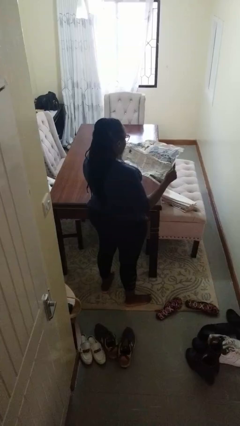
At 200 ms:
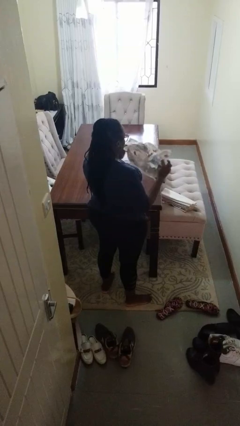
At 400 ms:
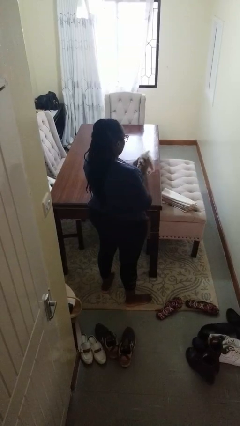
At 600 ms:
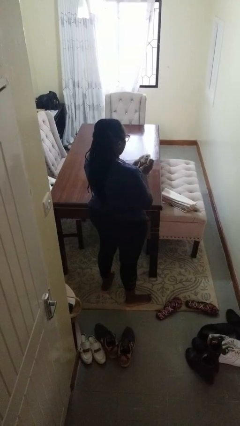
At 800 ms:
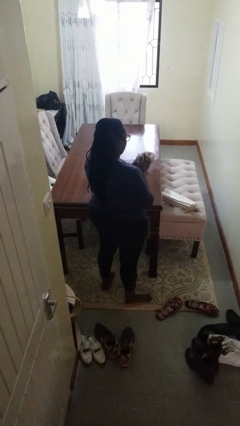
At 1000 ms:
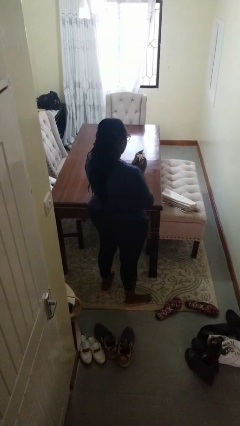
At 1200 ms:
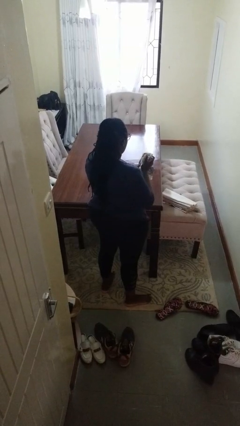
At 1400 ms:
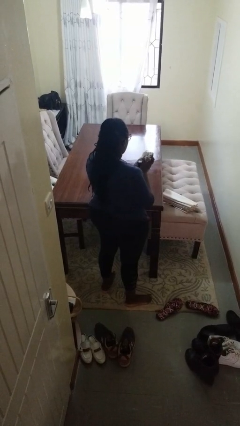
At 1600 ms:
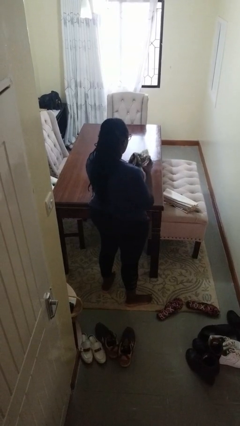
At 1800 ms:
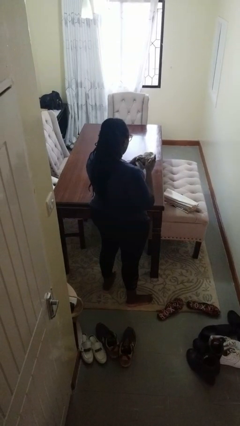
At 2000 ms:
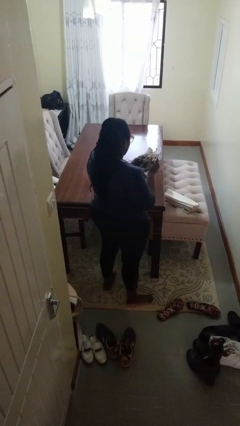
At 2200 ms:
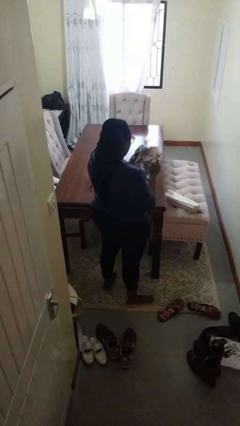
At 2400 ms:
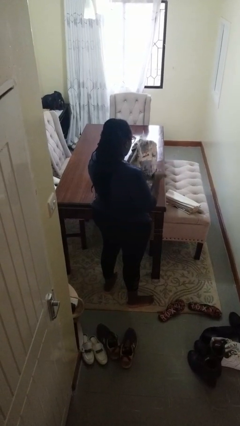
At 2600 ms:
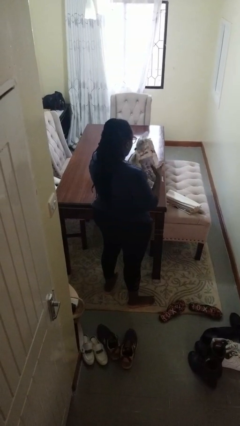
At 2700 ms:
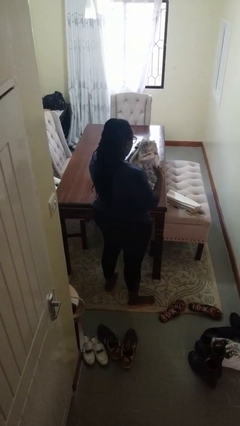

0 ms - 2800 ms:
person crumples paper

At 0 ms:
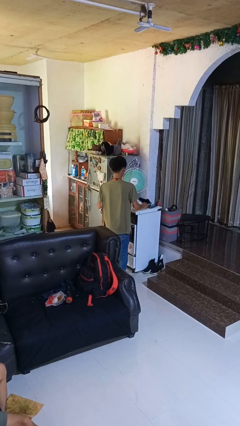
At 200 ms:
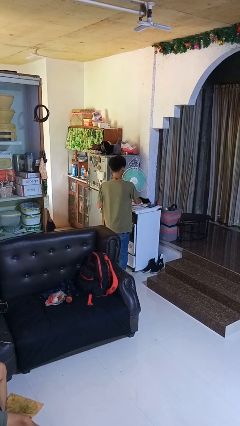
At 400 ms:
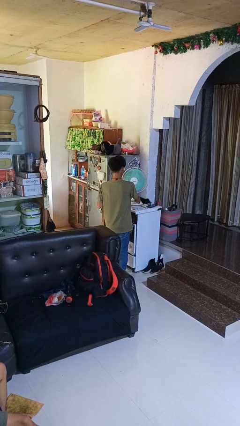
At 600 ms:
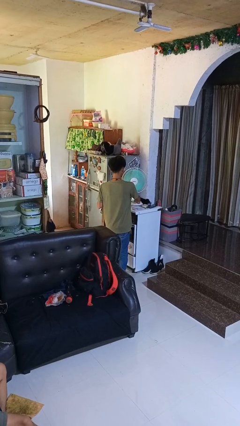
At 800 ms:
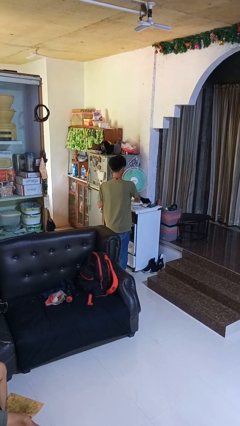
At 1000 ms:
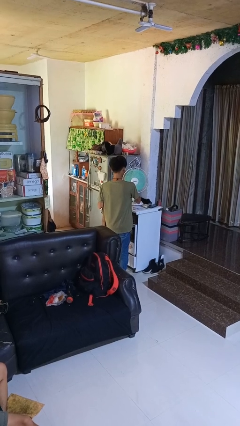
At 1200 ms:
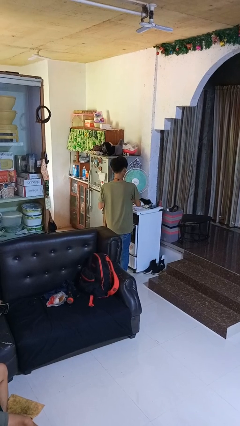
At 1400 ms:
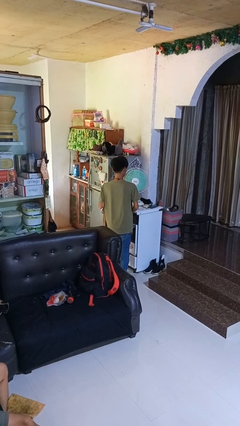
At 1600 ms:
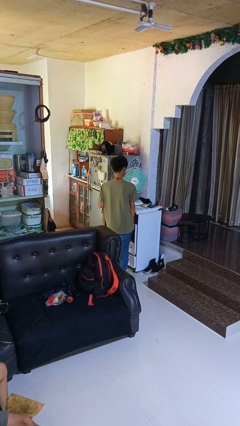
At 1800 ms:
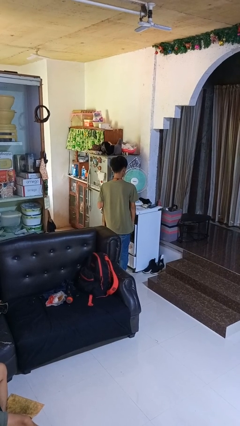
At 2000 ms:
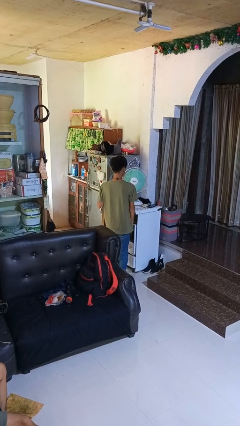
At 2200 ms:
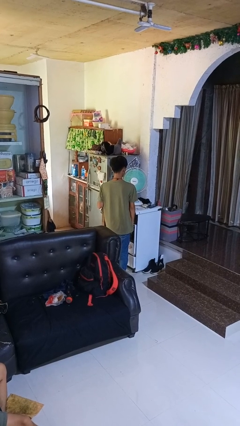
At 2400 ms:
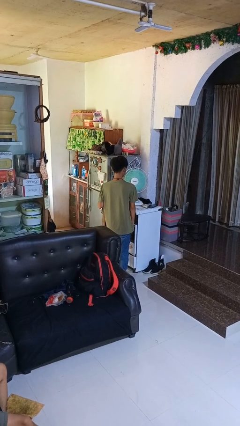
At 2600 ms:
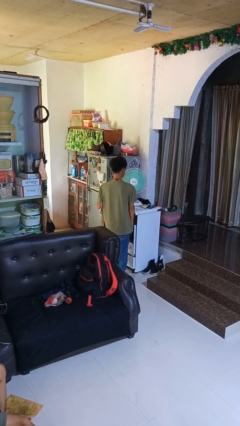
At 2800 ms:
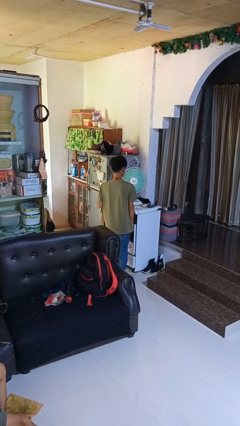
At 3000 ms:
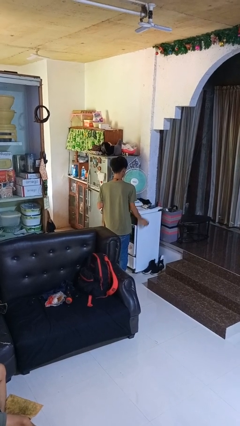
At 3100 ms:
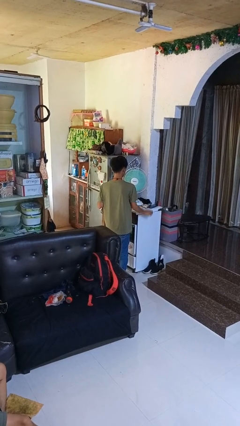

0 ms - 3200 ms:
person turns on fan

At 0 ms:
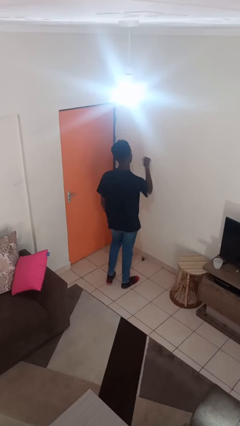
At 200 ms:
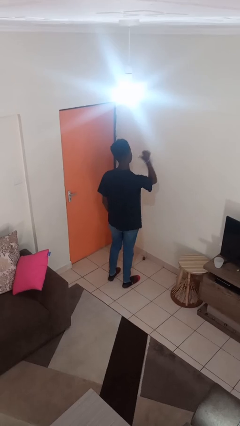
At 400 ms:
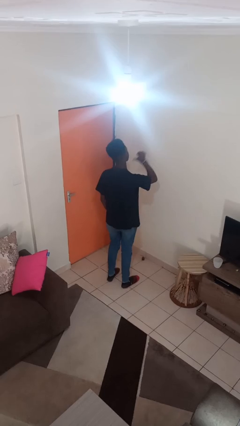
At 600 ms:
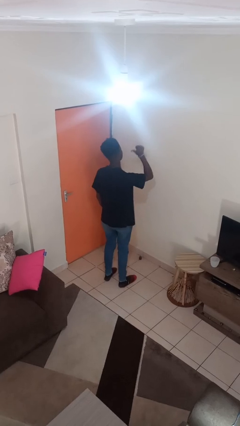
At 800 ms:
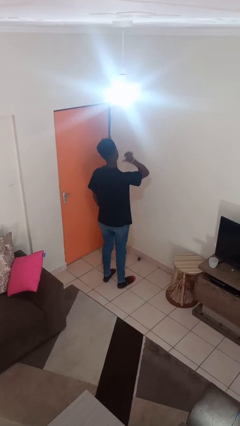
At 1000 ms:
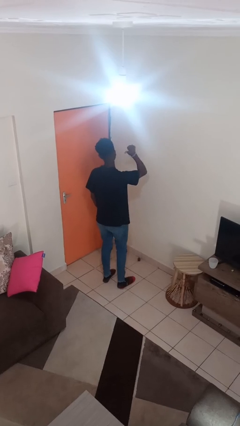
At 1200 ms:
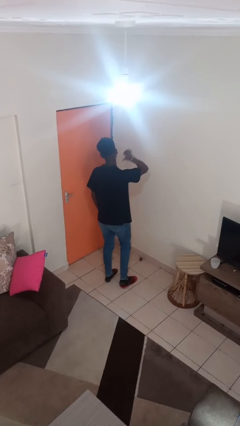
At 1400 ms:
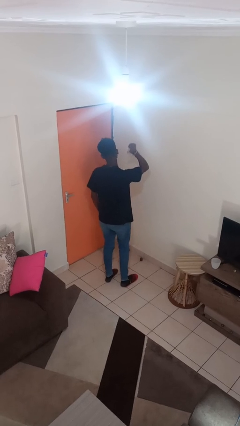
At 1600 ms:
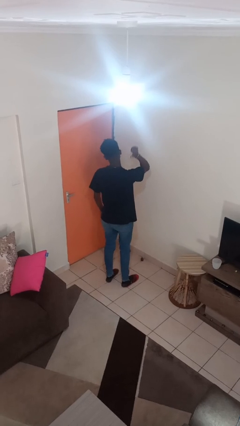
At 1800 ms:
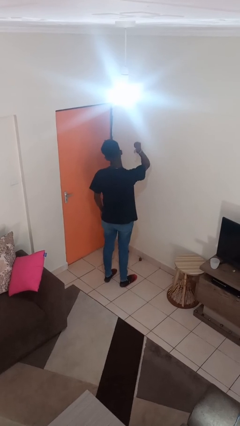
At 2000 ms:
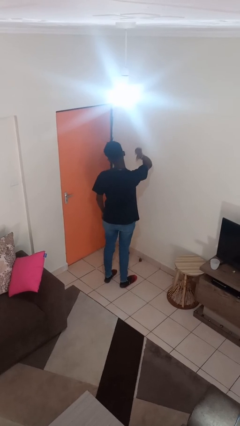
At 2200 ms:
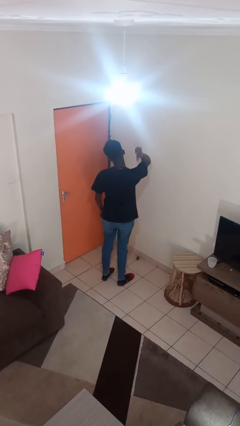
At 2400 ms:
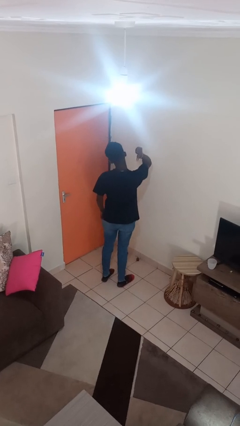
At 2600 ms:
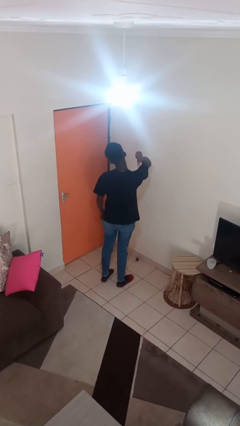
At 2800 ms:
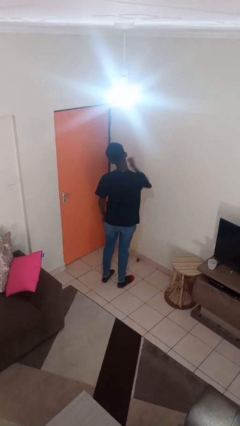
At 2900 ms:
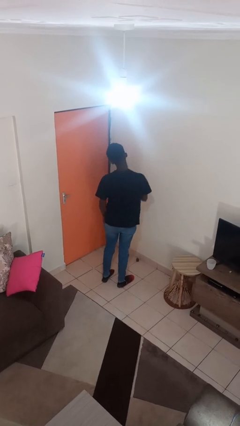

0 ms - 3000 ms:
person gestures behind me

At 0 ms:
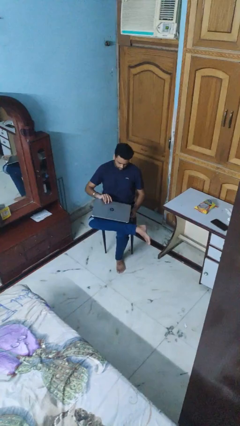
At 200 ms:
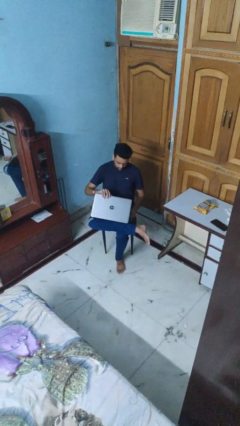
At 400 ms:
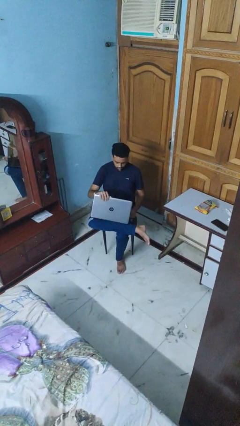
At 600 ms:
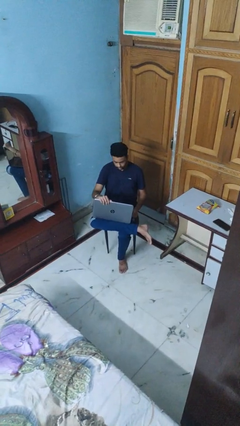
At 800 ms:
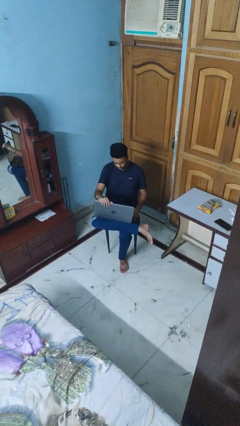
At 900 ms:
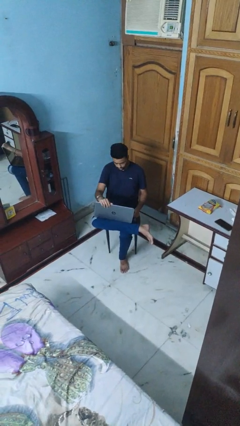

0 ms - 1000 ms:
person opens laptop

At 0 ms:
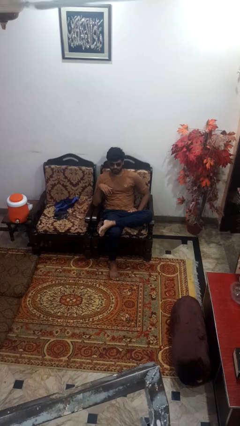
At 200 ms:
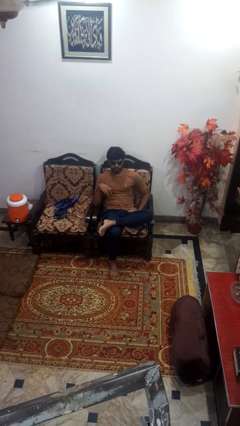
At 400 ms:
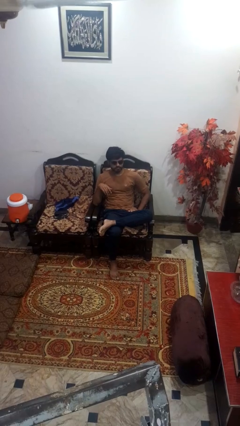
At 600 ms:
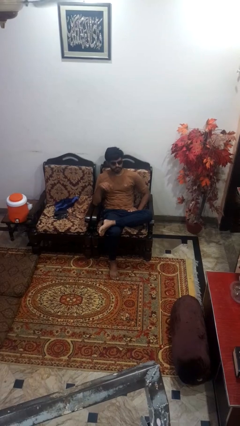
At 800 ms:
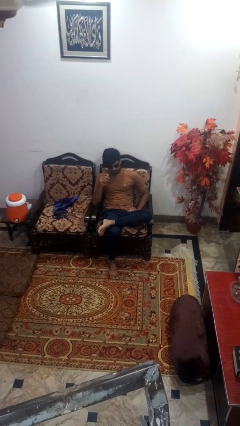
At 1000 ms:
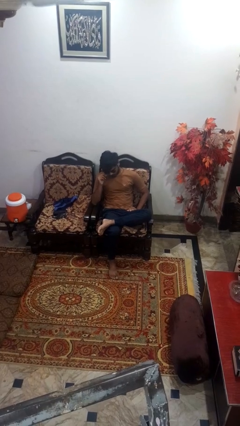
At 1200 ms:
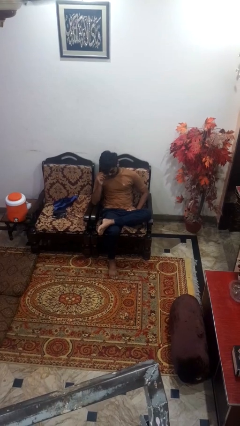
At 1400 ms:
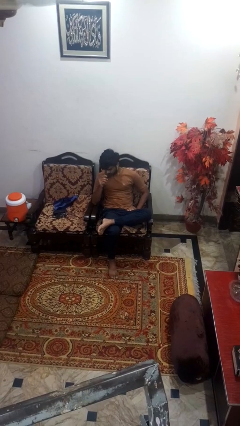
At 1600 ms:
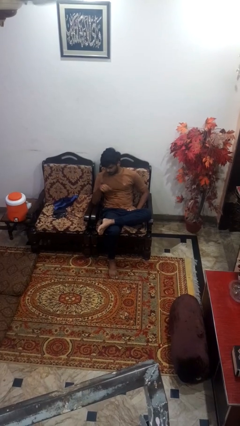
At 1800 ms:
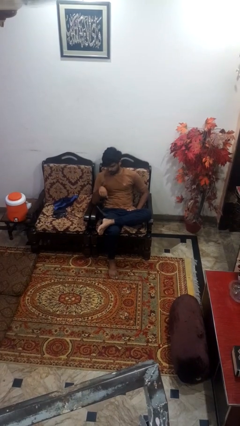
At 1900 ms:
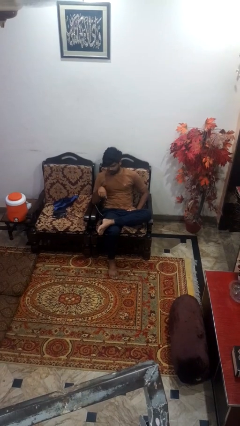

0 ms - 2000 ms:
person takes off sunglasses

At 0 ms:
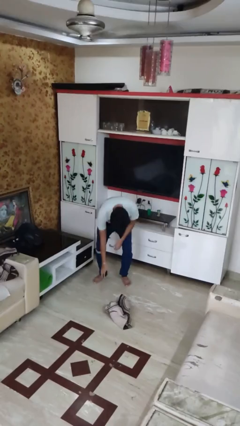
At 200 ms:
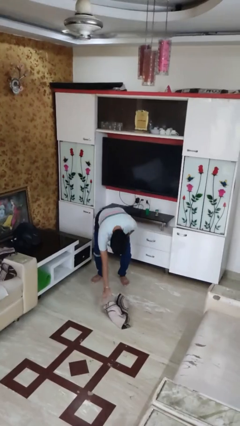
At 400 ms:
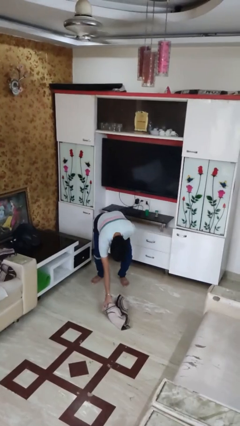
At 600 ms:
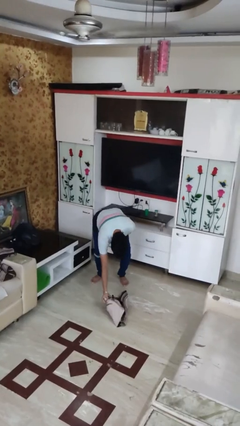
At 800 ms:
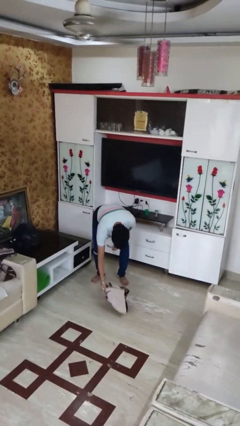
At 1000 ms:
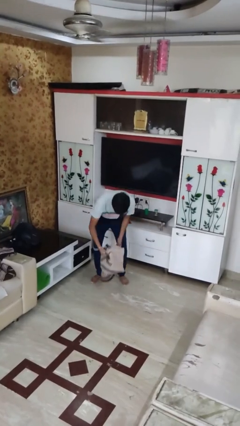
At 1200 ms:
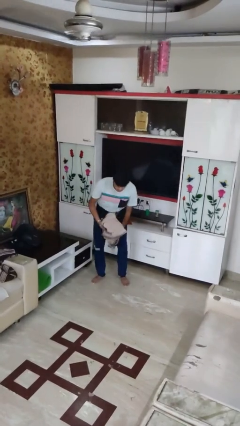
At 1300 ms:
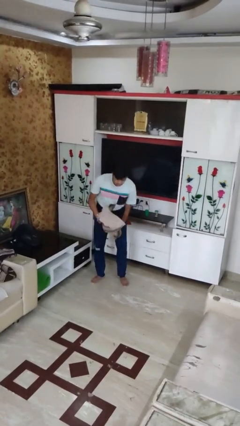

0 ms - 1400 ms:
person picks up object from floor

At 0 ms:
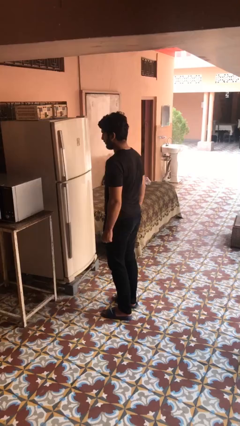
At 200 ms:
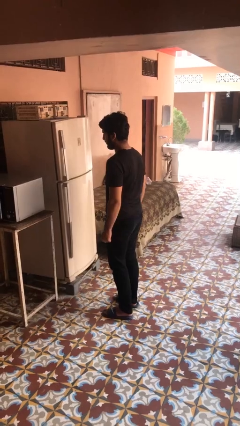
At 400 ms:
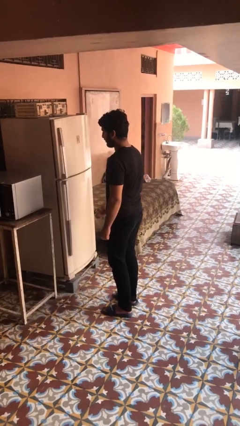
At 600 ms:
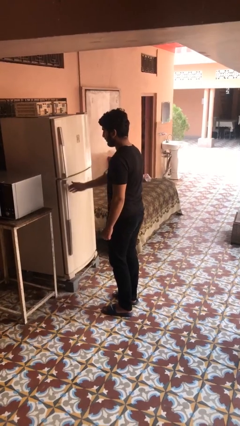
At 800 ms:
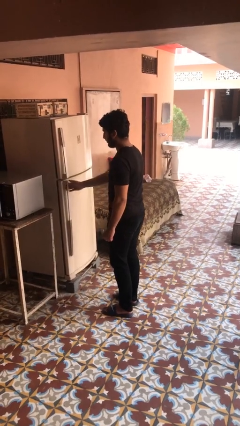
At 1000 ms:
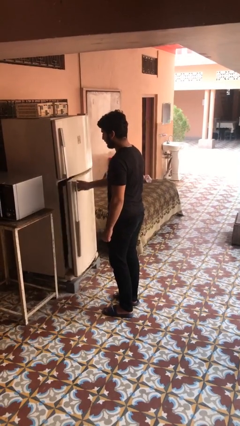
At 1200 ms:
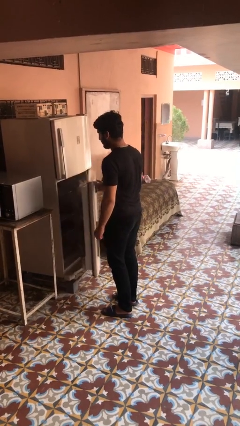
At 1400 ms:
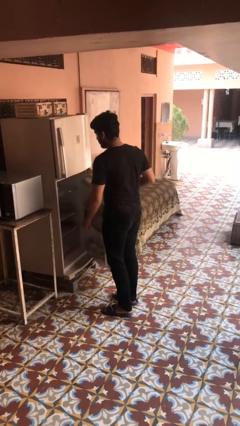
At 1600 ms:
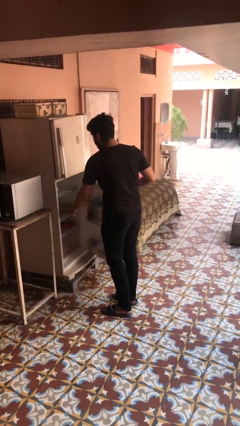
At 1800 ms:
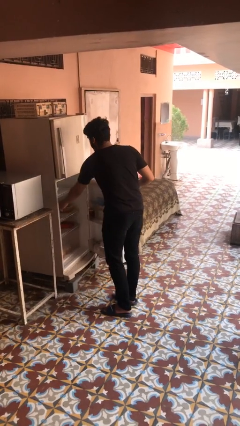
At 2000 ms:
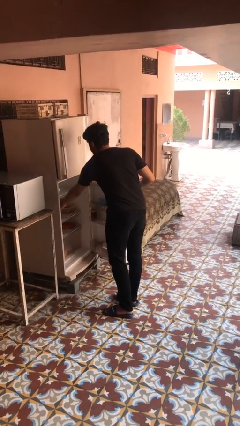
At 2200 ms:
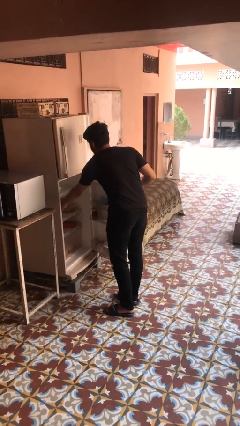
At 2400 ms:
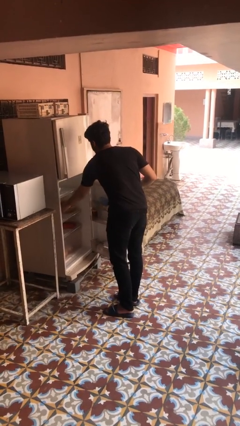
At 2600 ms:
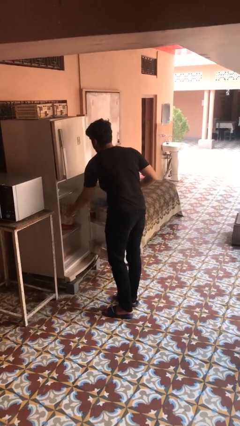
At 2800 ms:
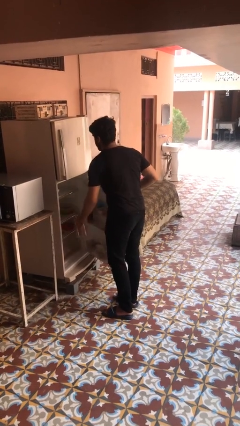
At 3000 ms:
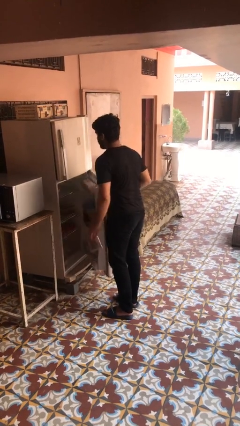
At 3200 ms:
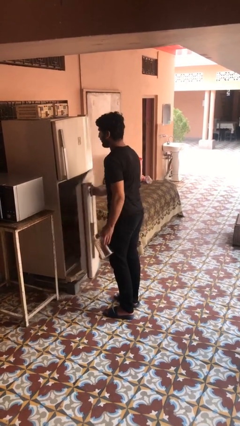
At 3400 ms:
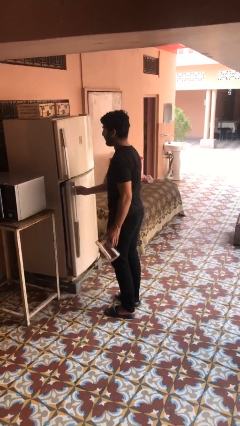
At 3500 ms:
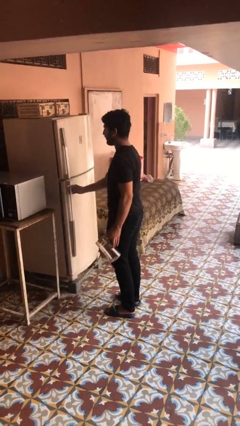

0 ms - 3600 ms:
person takes object from refrigerator
